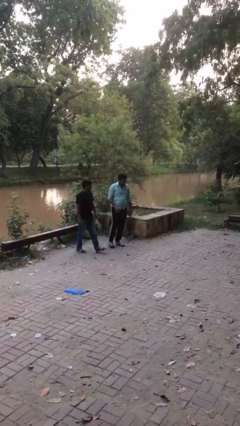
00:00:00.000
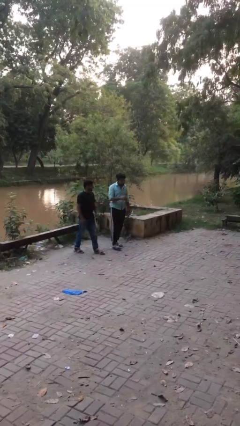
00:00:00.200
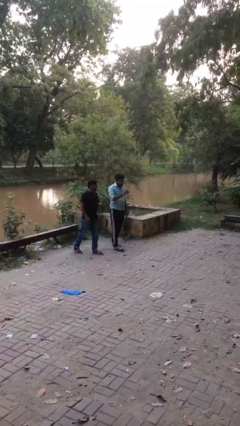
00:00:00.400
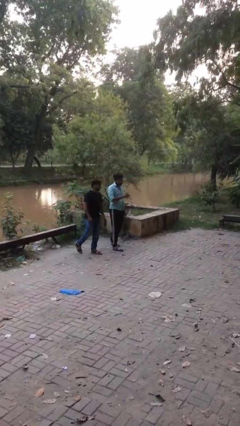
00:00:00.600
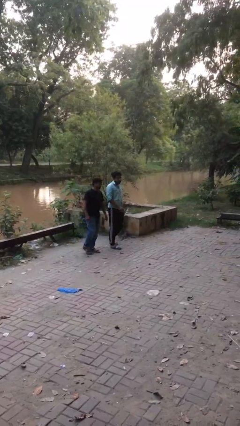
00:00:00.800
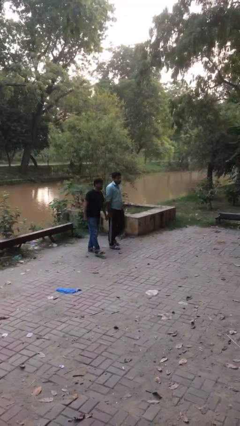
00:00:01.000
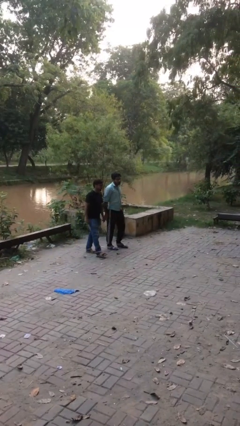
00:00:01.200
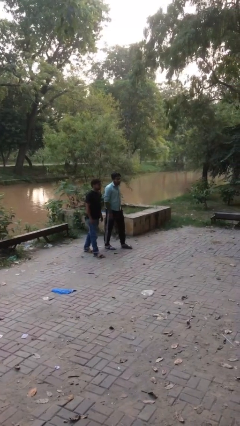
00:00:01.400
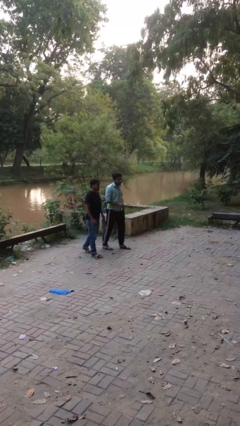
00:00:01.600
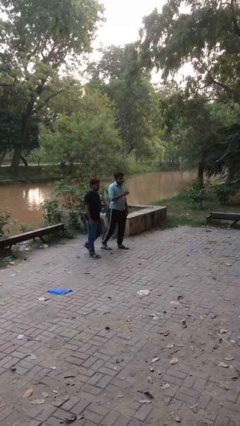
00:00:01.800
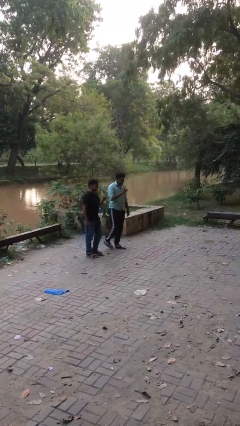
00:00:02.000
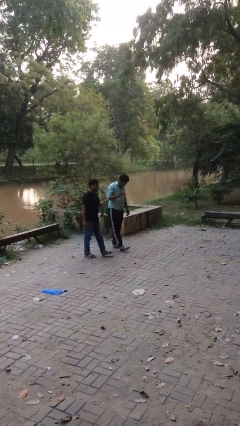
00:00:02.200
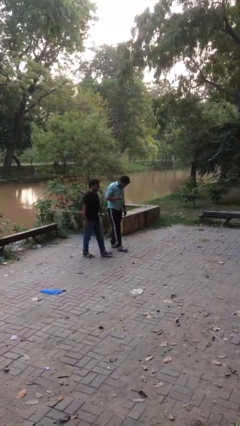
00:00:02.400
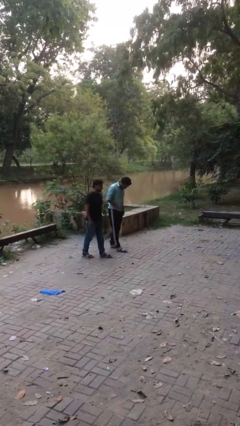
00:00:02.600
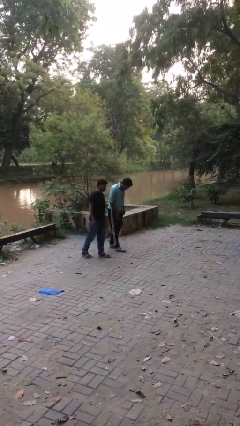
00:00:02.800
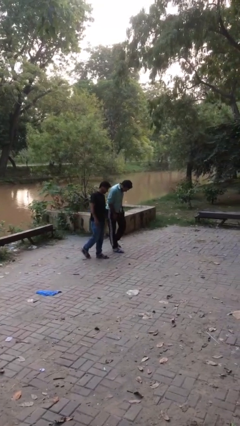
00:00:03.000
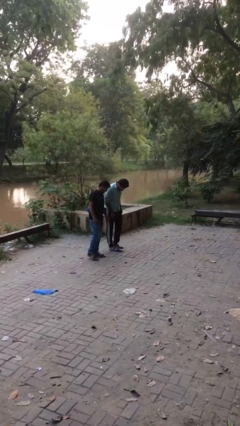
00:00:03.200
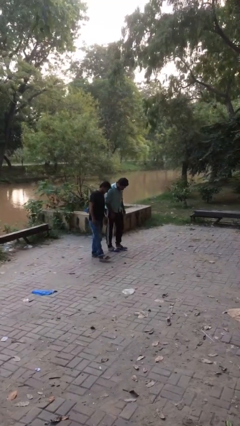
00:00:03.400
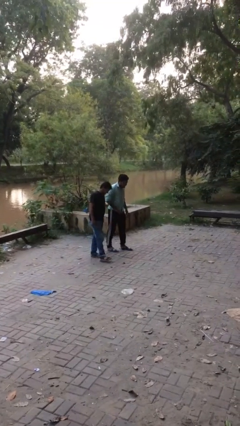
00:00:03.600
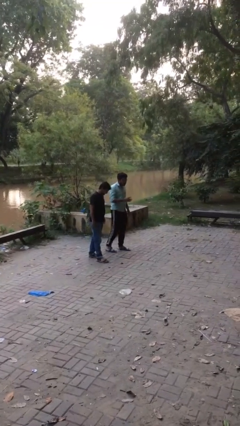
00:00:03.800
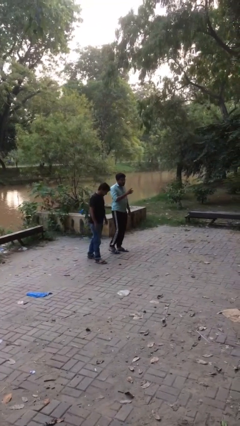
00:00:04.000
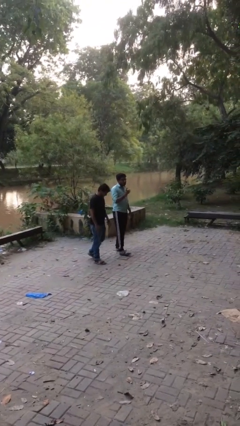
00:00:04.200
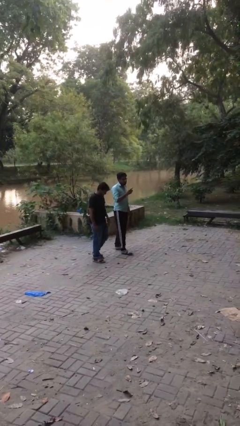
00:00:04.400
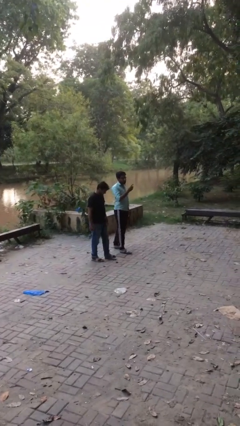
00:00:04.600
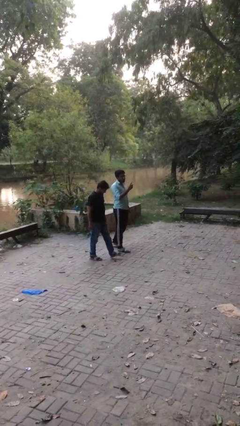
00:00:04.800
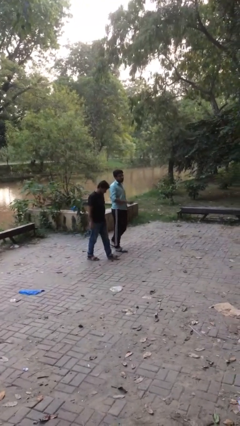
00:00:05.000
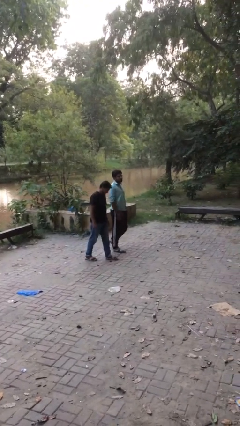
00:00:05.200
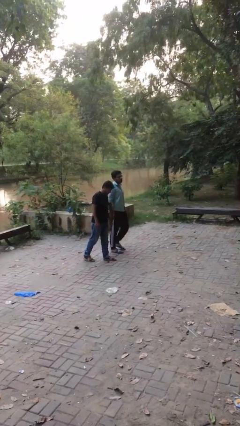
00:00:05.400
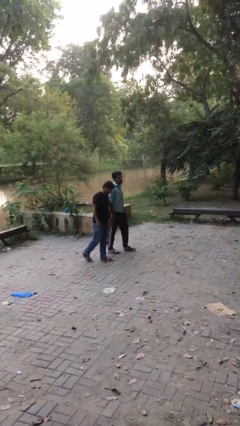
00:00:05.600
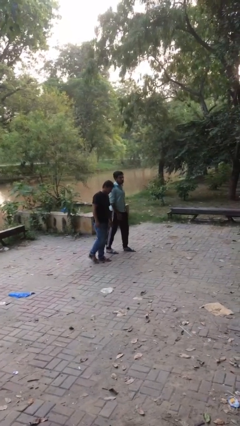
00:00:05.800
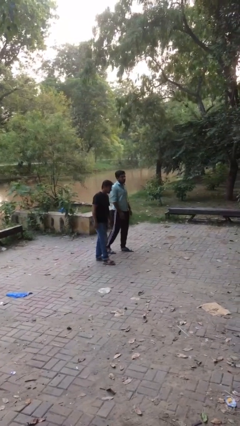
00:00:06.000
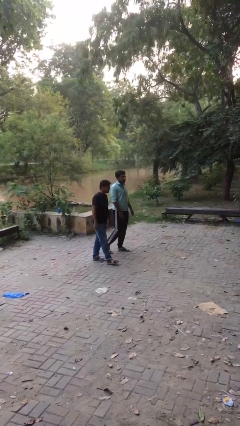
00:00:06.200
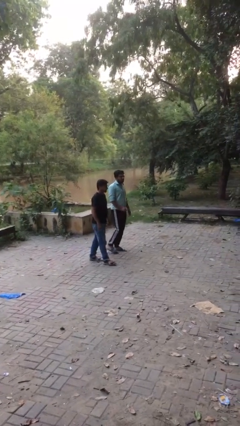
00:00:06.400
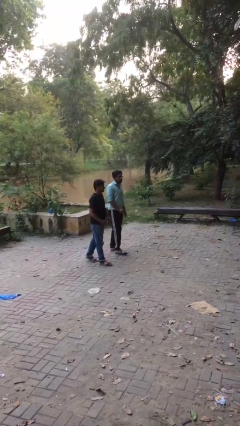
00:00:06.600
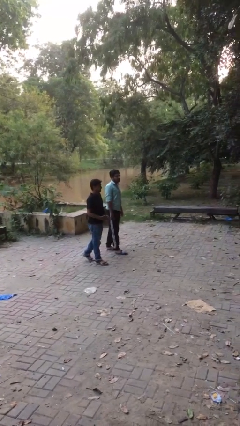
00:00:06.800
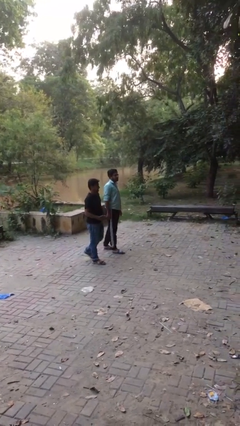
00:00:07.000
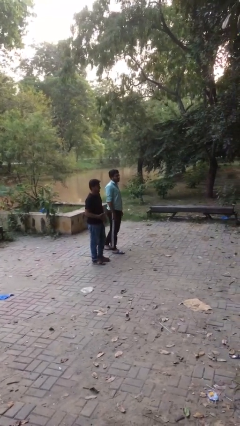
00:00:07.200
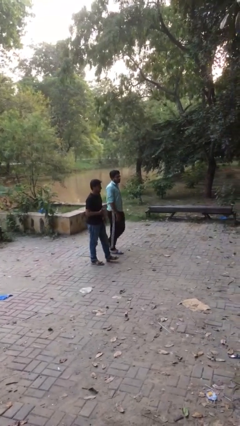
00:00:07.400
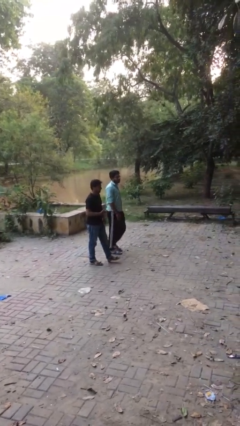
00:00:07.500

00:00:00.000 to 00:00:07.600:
person talks to person

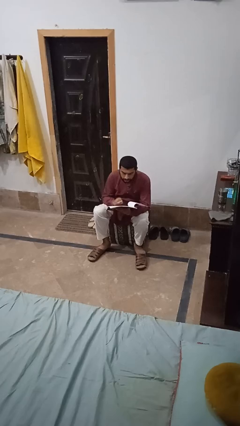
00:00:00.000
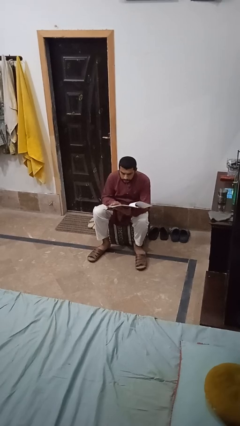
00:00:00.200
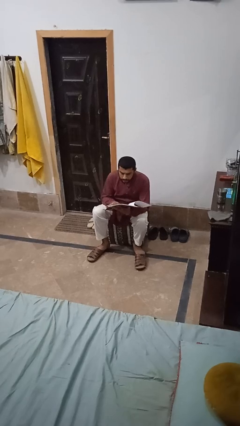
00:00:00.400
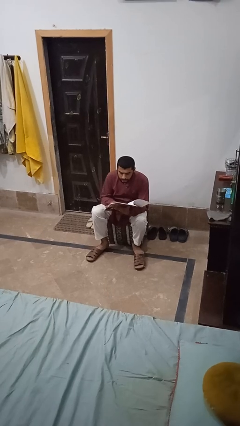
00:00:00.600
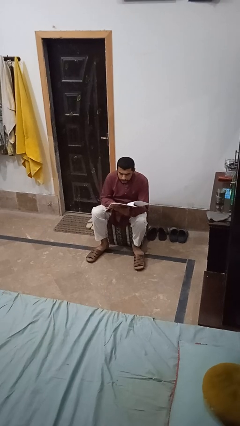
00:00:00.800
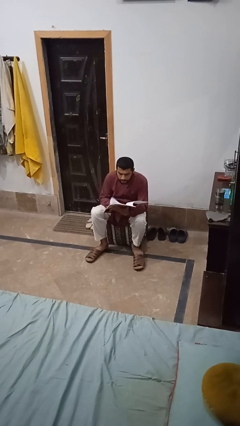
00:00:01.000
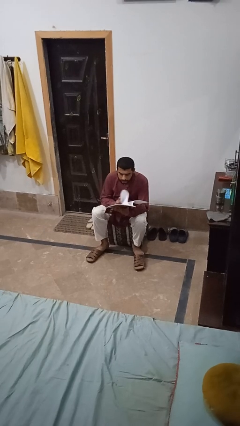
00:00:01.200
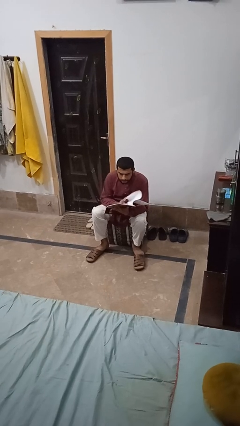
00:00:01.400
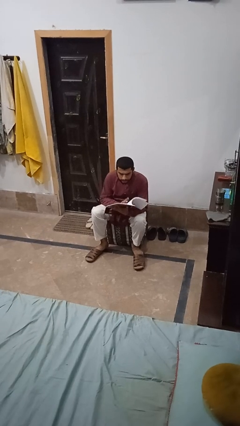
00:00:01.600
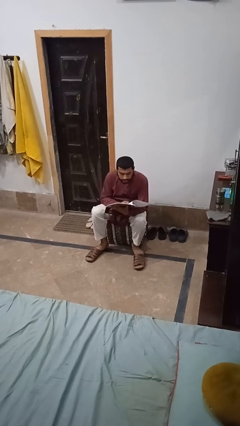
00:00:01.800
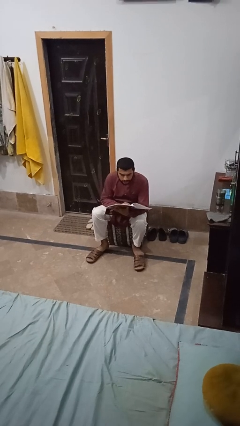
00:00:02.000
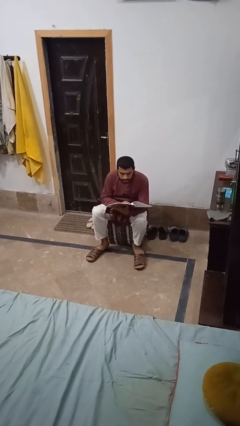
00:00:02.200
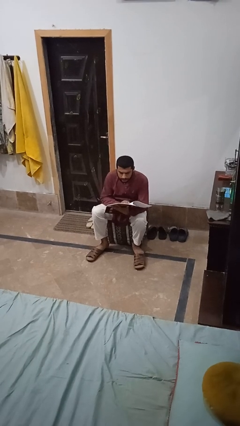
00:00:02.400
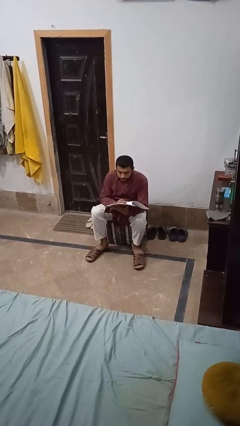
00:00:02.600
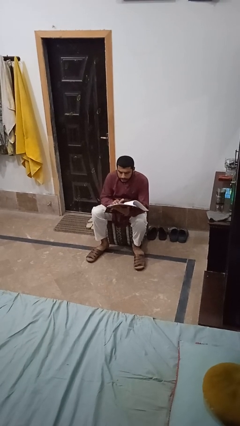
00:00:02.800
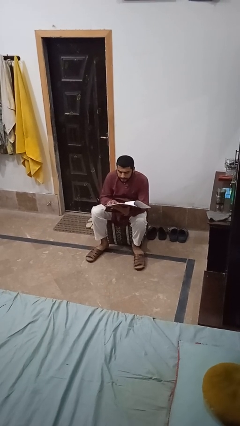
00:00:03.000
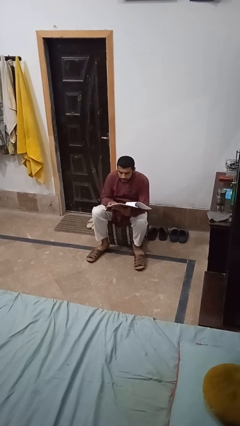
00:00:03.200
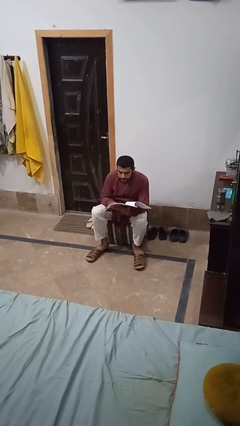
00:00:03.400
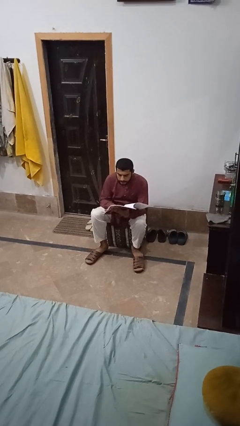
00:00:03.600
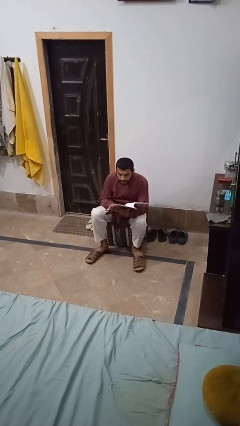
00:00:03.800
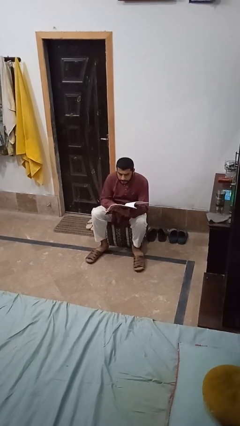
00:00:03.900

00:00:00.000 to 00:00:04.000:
person stands up from floor

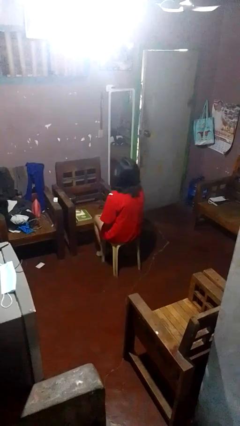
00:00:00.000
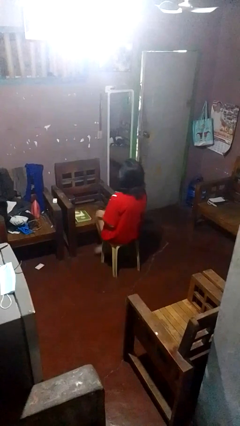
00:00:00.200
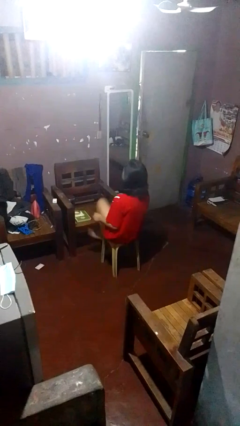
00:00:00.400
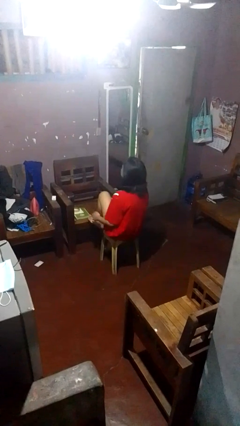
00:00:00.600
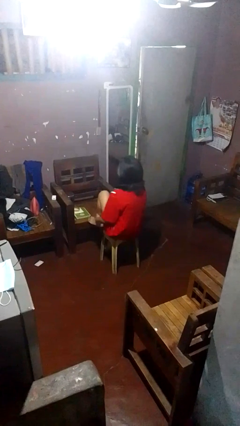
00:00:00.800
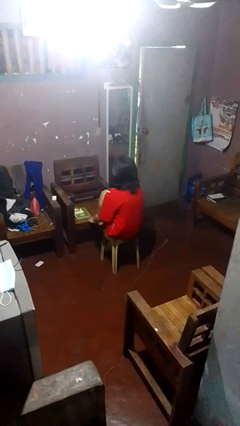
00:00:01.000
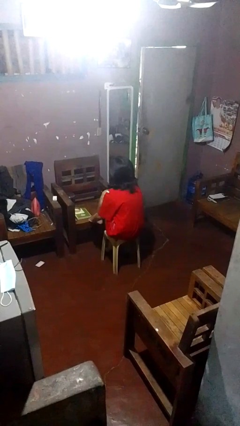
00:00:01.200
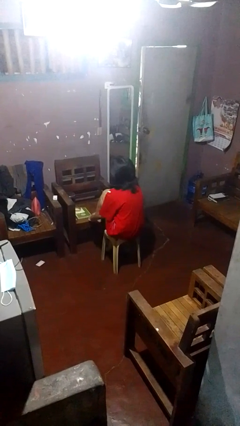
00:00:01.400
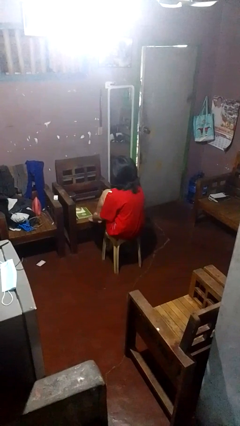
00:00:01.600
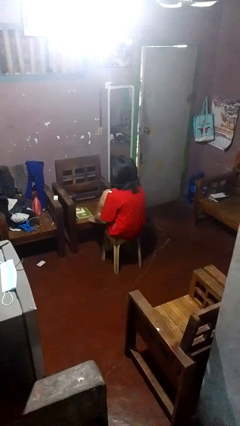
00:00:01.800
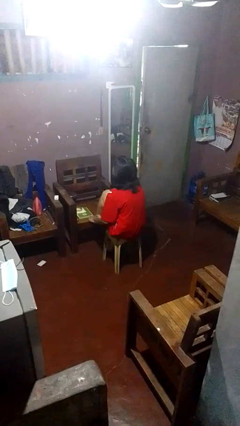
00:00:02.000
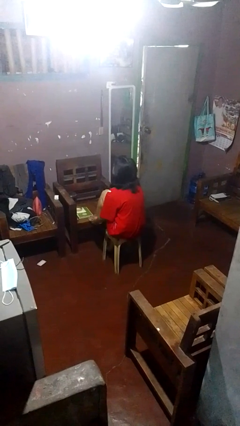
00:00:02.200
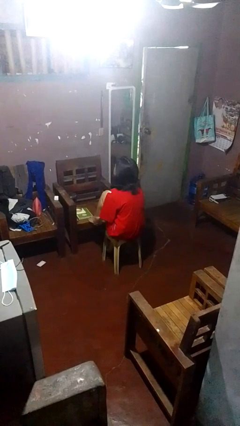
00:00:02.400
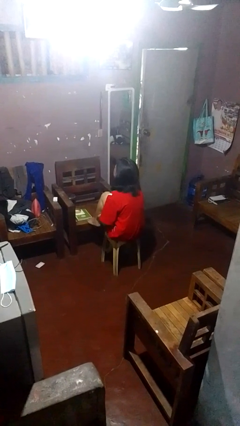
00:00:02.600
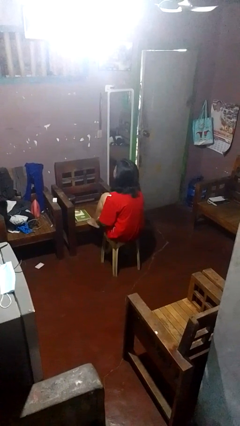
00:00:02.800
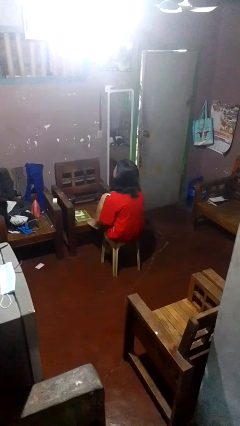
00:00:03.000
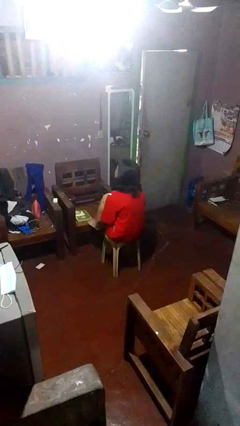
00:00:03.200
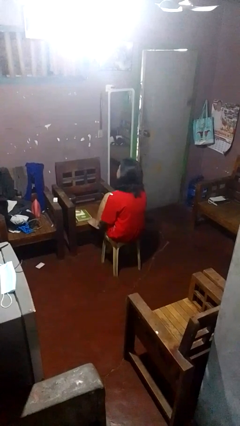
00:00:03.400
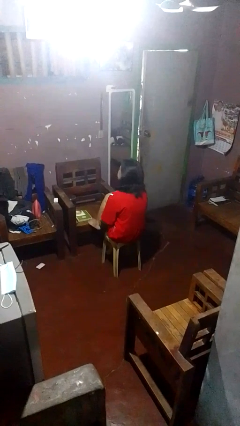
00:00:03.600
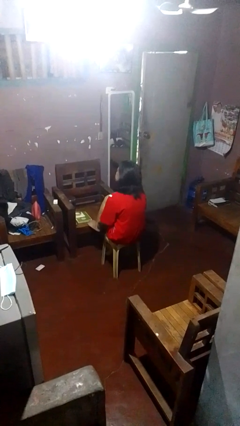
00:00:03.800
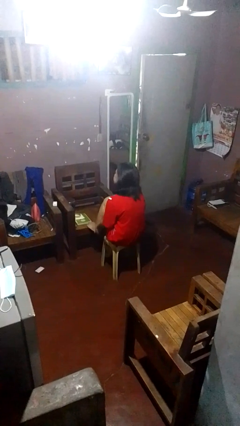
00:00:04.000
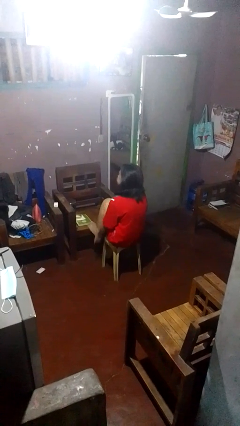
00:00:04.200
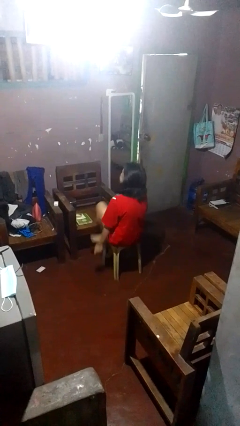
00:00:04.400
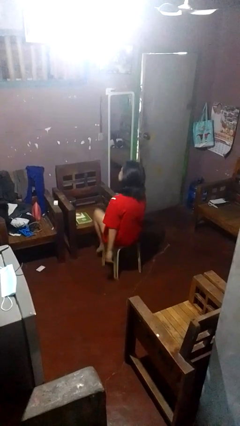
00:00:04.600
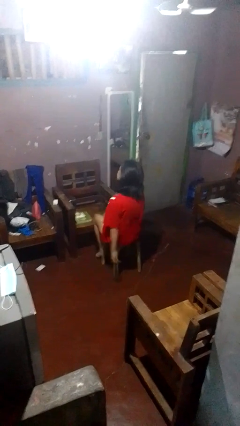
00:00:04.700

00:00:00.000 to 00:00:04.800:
person rubs foot

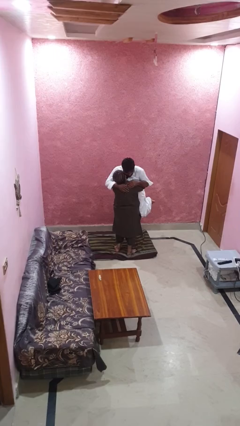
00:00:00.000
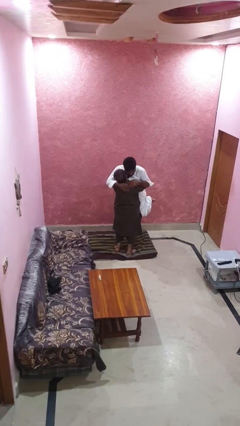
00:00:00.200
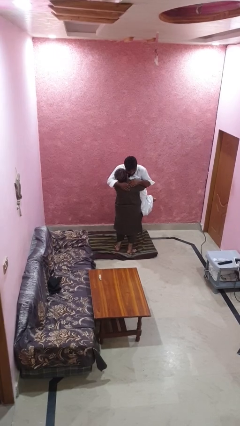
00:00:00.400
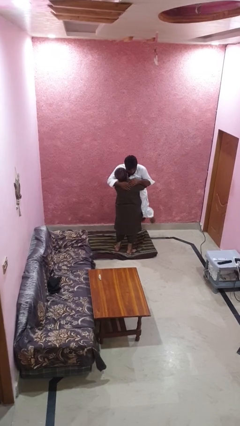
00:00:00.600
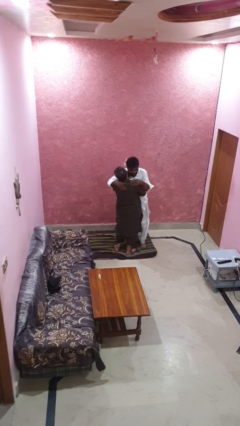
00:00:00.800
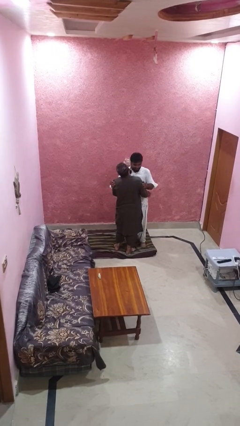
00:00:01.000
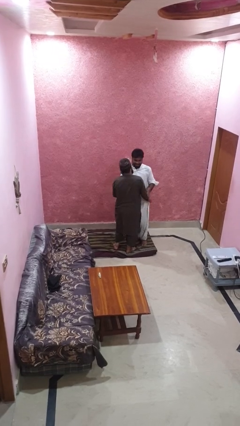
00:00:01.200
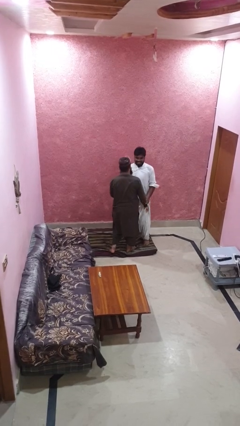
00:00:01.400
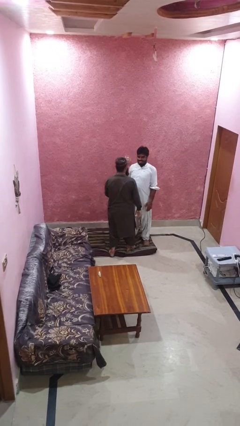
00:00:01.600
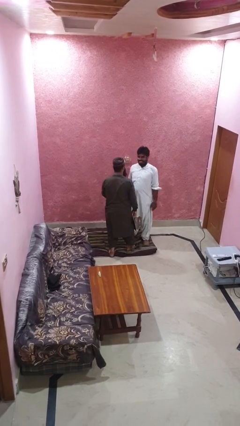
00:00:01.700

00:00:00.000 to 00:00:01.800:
person puts down person
